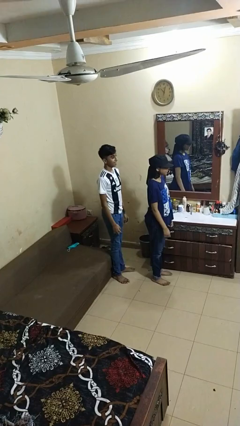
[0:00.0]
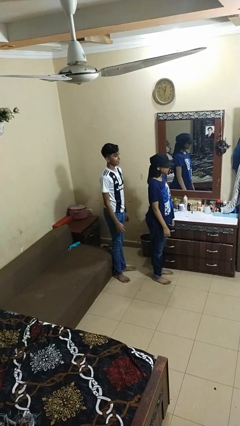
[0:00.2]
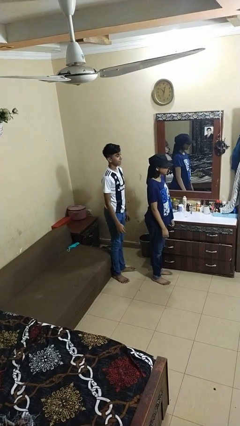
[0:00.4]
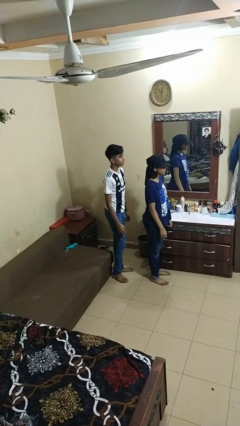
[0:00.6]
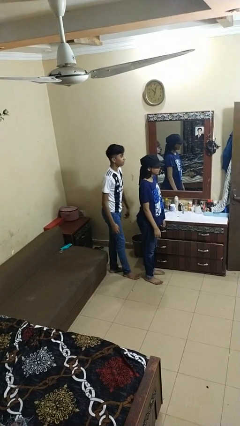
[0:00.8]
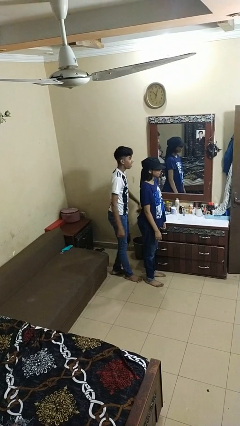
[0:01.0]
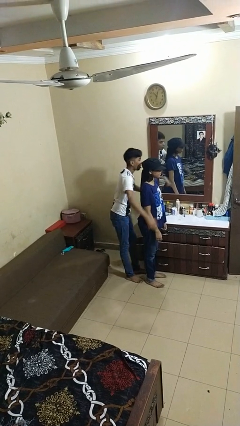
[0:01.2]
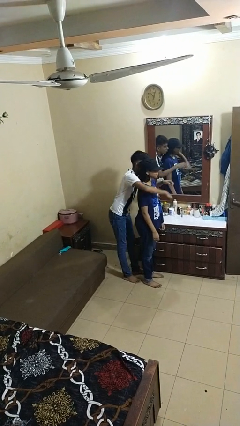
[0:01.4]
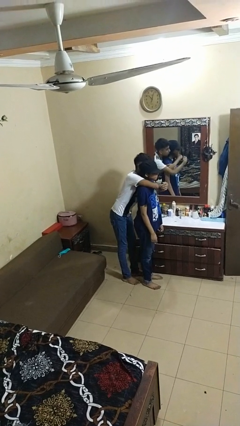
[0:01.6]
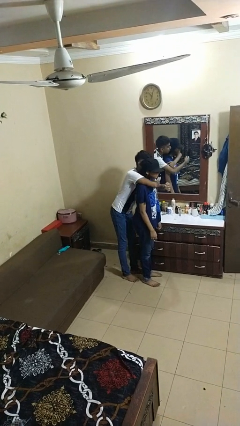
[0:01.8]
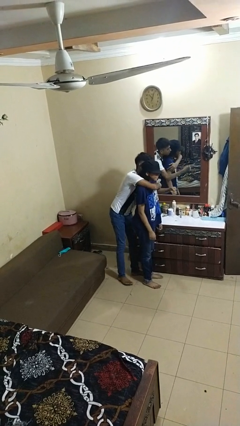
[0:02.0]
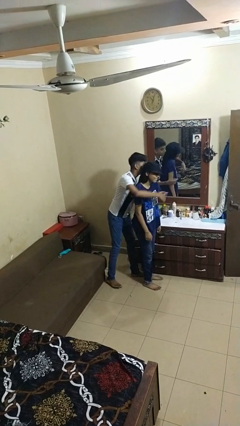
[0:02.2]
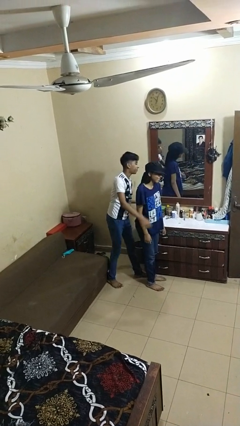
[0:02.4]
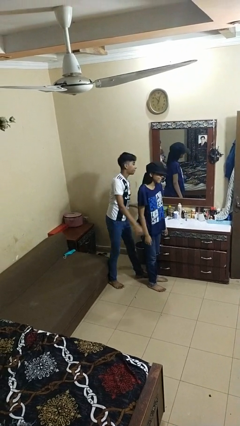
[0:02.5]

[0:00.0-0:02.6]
person hugs person from behind

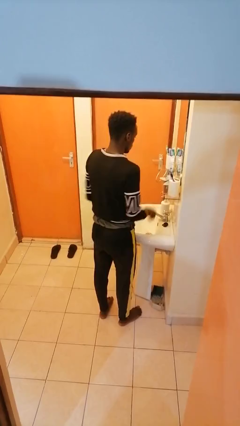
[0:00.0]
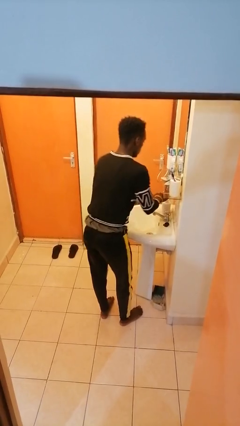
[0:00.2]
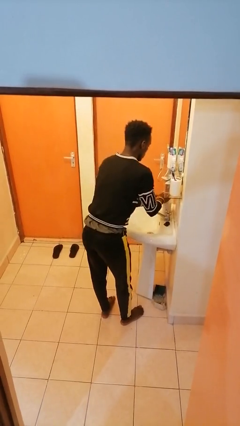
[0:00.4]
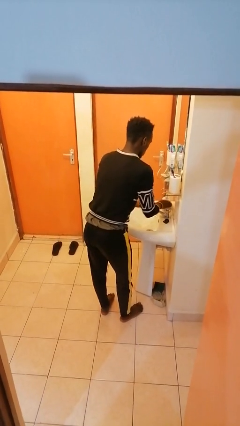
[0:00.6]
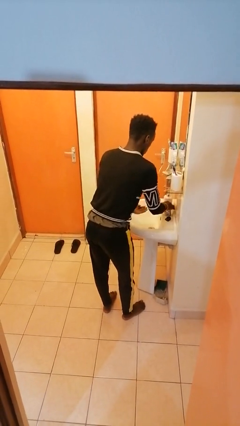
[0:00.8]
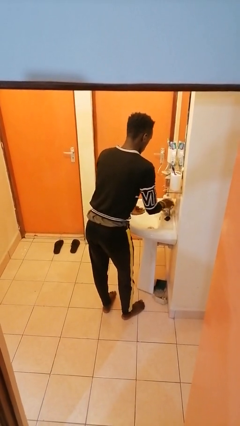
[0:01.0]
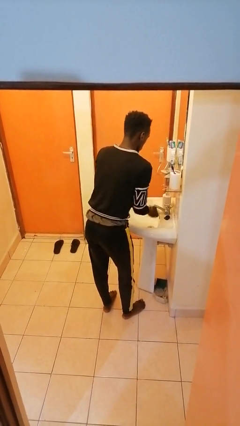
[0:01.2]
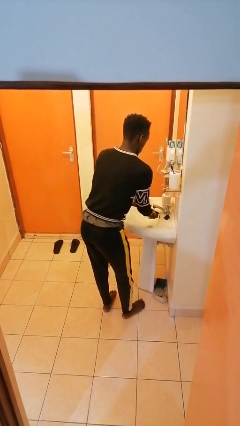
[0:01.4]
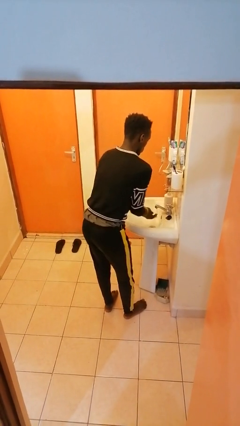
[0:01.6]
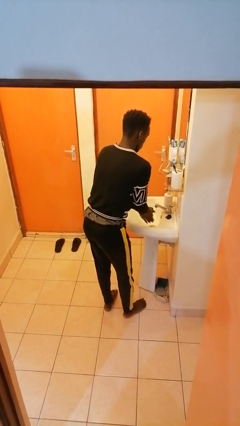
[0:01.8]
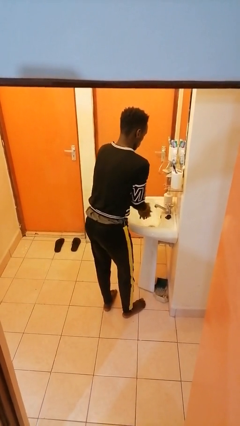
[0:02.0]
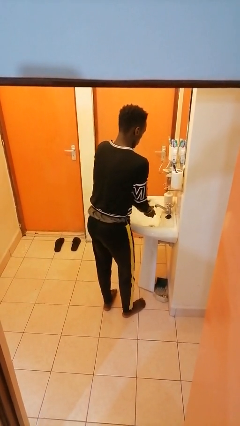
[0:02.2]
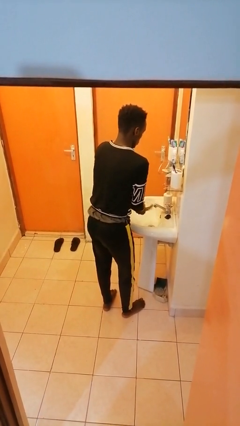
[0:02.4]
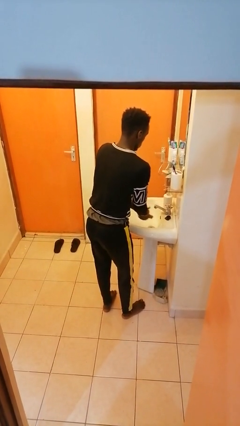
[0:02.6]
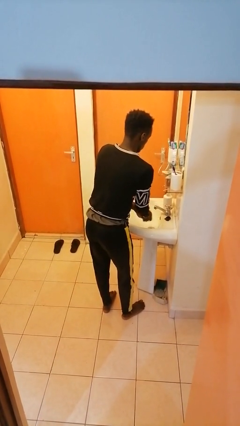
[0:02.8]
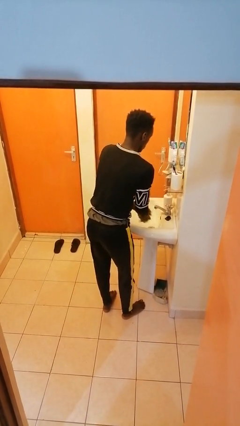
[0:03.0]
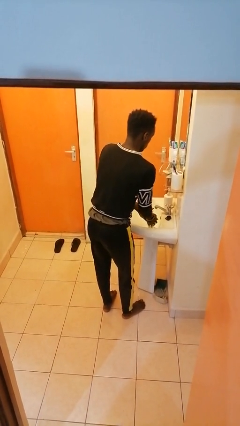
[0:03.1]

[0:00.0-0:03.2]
person washes hands

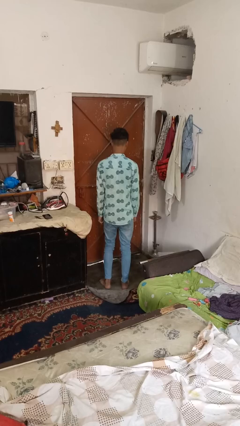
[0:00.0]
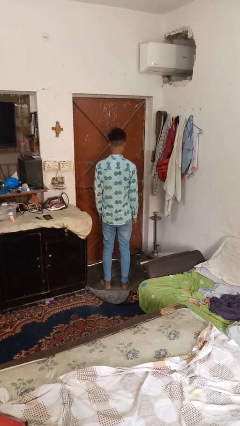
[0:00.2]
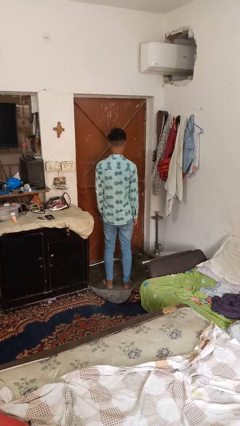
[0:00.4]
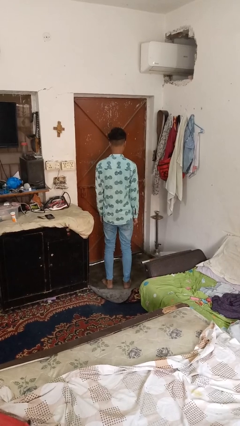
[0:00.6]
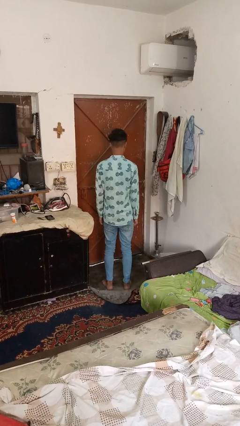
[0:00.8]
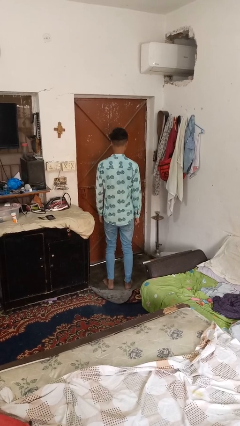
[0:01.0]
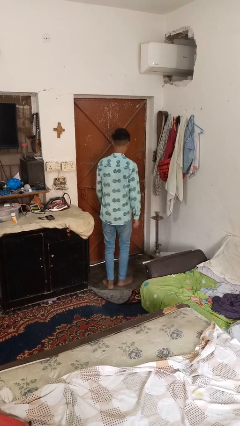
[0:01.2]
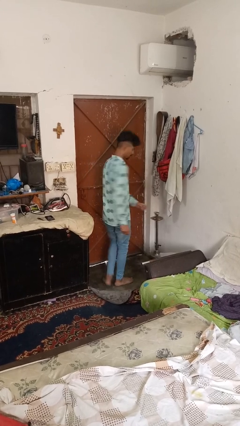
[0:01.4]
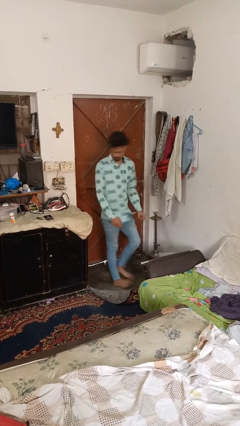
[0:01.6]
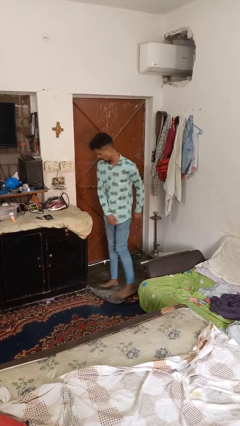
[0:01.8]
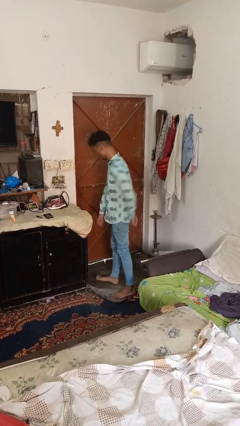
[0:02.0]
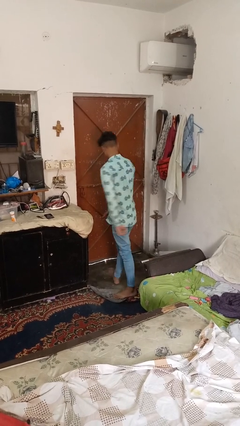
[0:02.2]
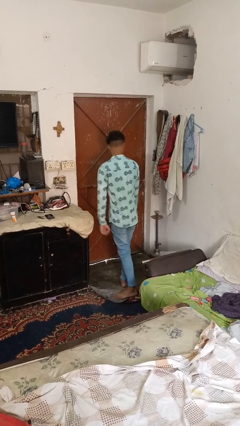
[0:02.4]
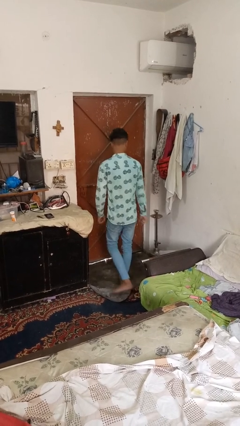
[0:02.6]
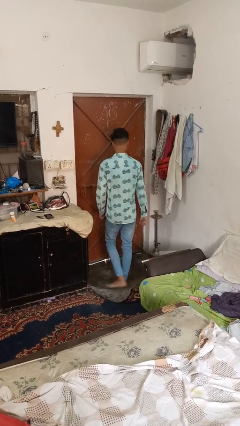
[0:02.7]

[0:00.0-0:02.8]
person twirls

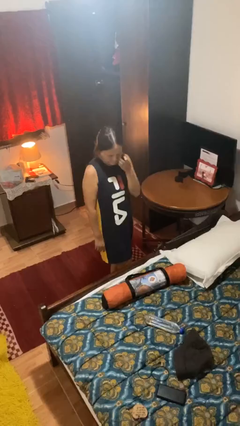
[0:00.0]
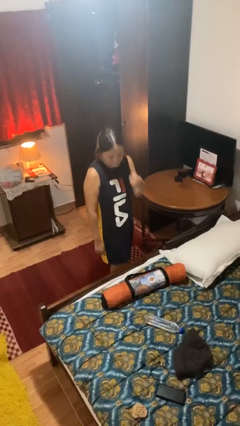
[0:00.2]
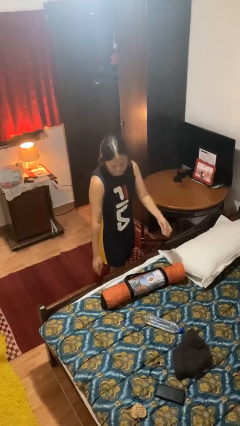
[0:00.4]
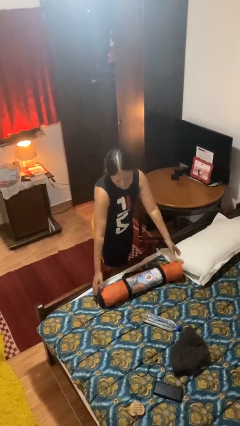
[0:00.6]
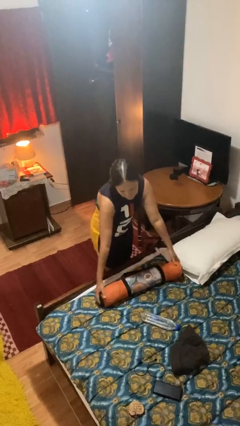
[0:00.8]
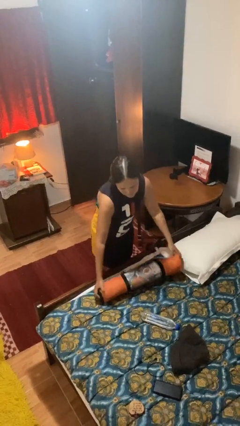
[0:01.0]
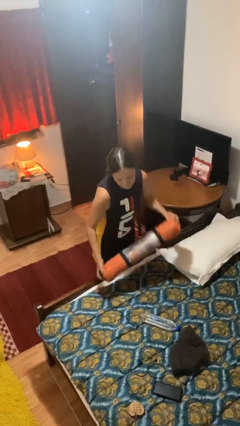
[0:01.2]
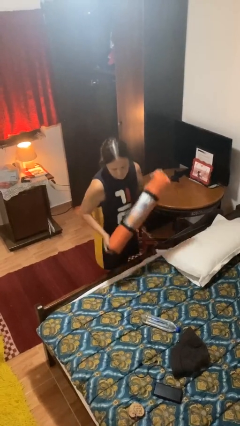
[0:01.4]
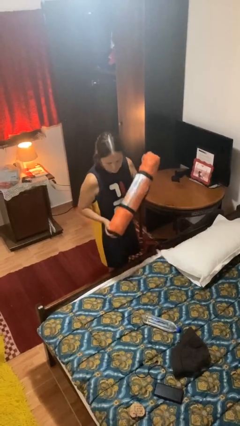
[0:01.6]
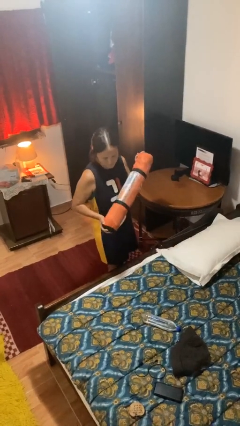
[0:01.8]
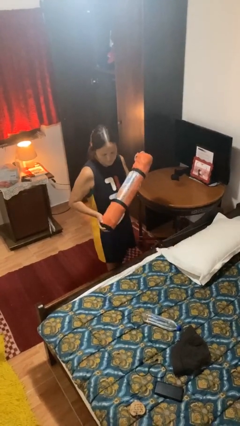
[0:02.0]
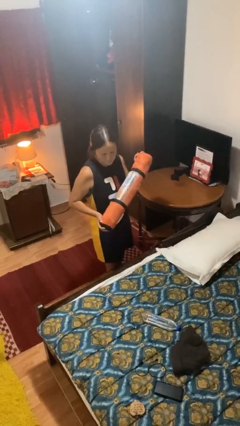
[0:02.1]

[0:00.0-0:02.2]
person picks up object from bed

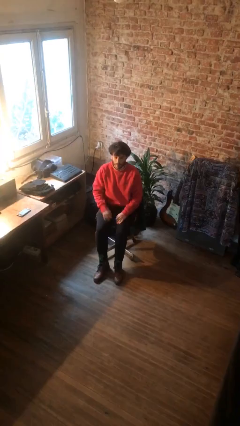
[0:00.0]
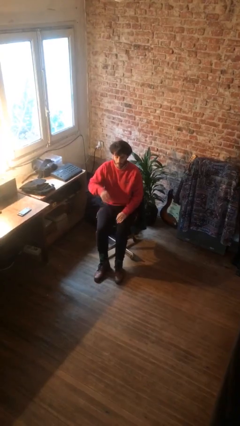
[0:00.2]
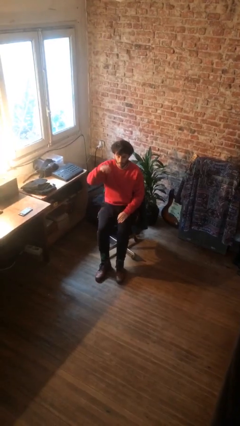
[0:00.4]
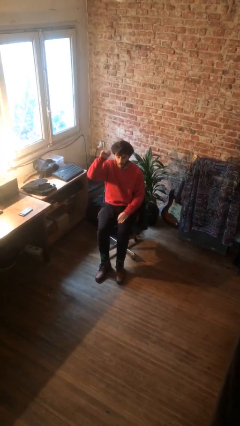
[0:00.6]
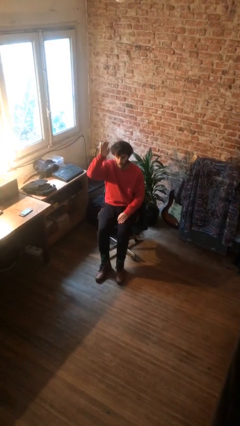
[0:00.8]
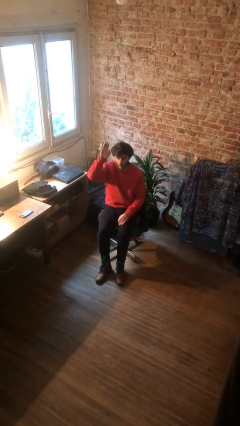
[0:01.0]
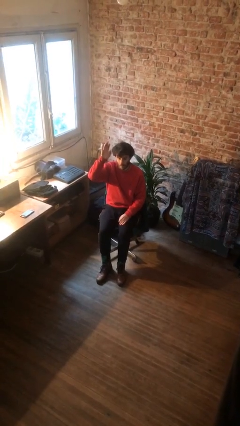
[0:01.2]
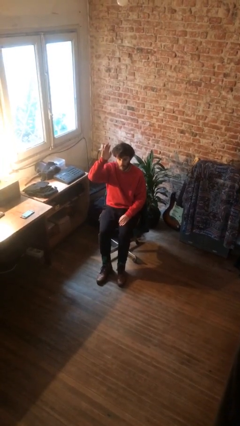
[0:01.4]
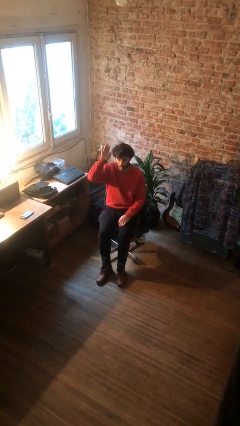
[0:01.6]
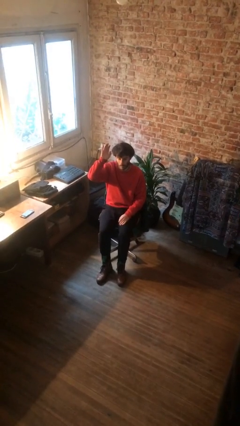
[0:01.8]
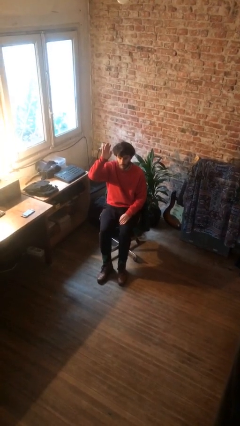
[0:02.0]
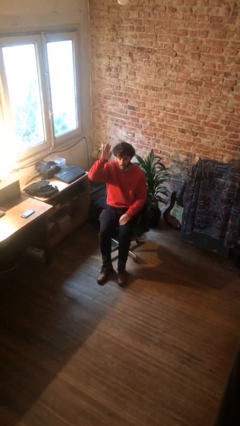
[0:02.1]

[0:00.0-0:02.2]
person gestures raise hand

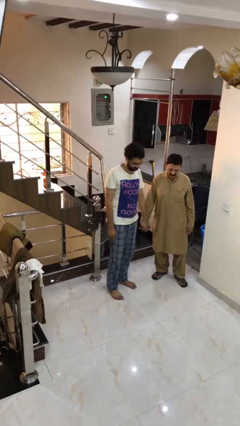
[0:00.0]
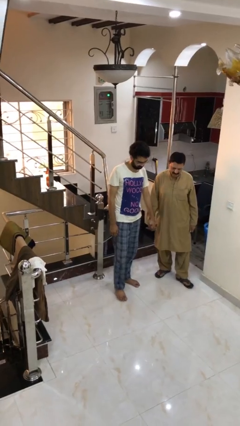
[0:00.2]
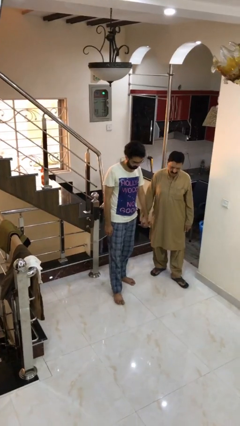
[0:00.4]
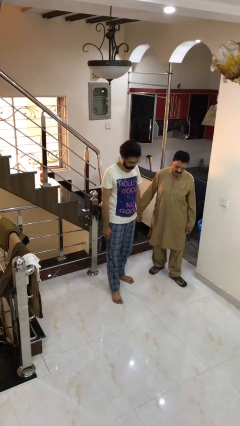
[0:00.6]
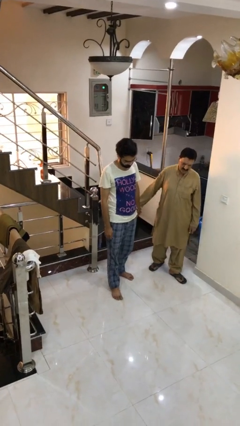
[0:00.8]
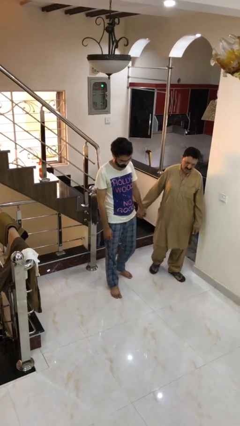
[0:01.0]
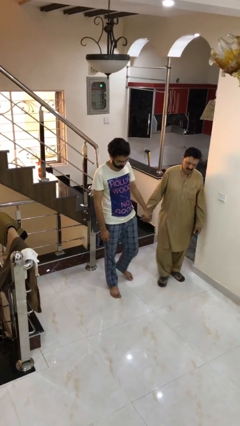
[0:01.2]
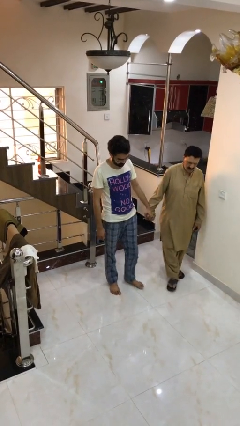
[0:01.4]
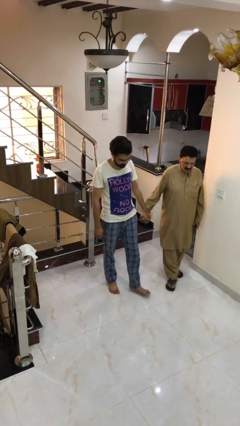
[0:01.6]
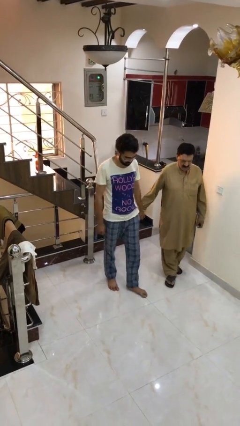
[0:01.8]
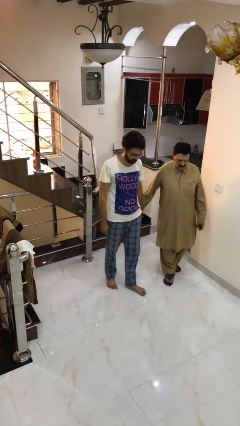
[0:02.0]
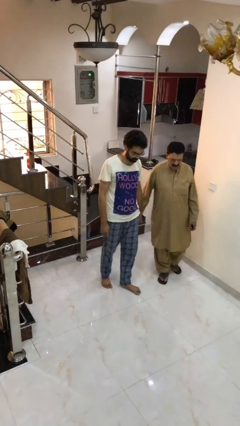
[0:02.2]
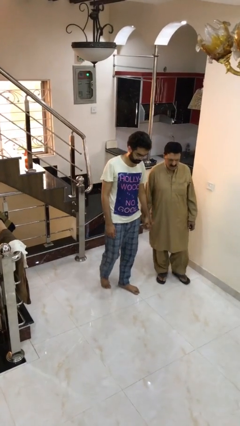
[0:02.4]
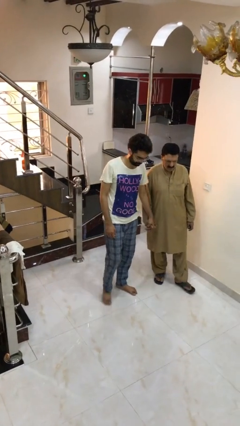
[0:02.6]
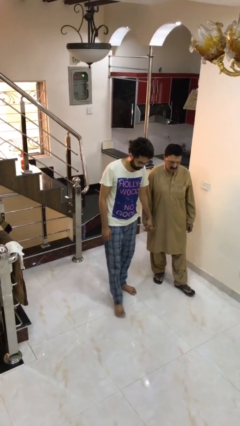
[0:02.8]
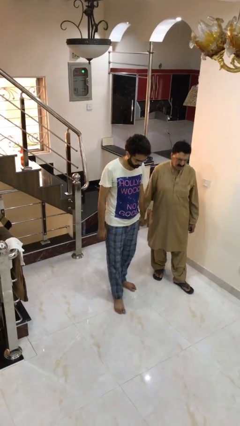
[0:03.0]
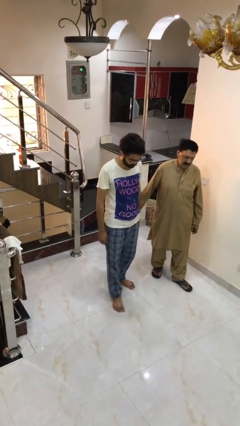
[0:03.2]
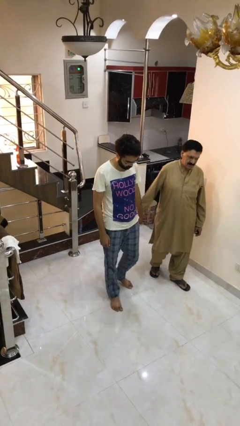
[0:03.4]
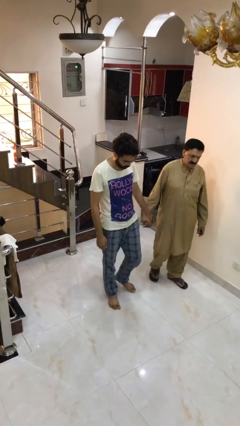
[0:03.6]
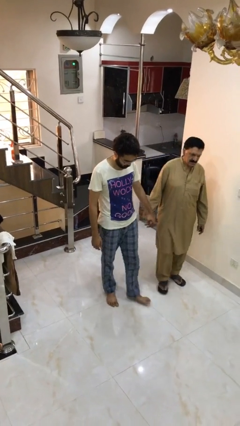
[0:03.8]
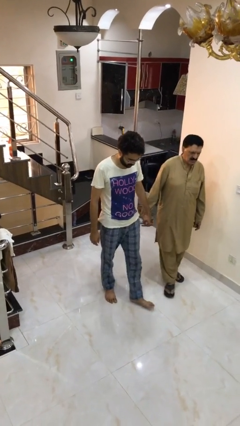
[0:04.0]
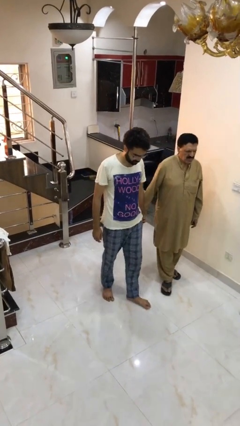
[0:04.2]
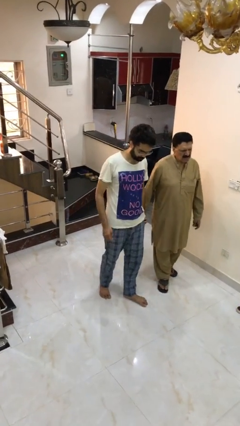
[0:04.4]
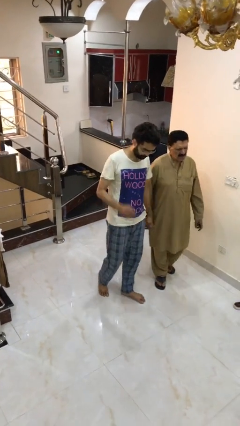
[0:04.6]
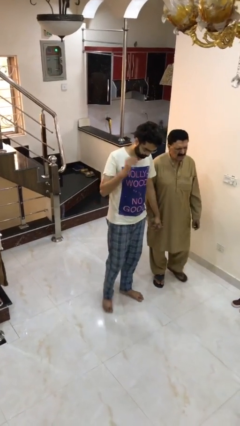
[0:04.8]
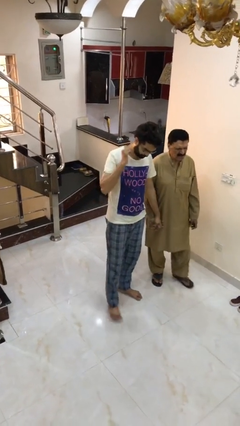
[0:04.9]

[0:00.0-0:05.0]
person holds hand
